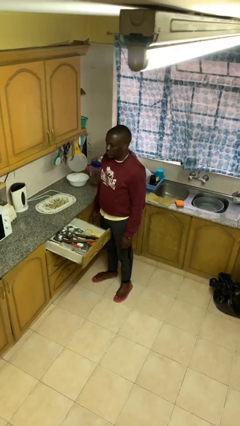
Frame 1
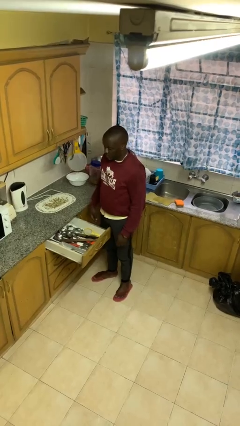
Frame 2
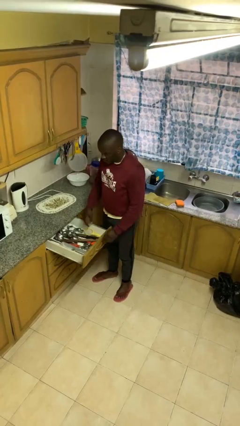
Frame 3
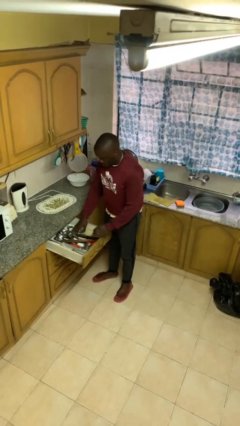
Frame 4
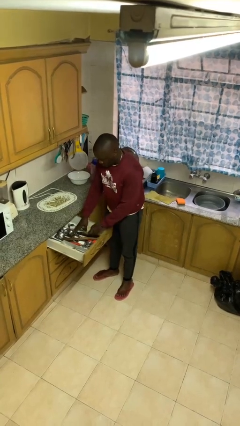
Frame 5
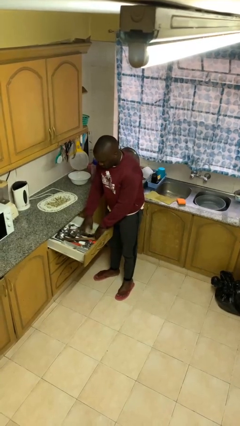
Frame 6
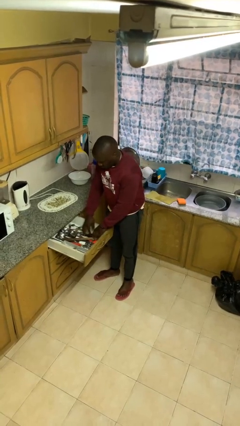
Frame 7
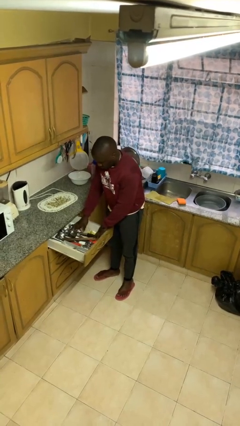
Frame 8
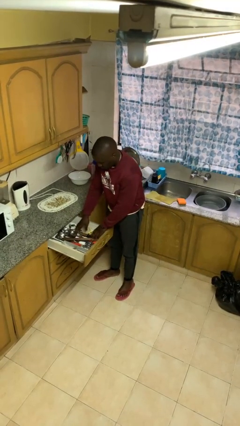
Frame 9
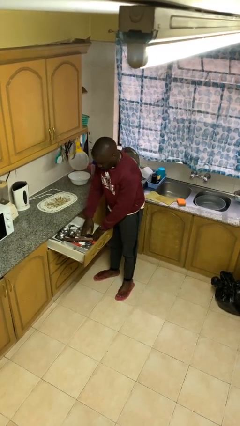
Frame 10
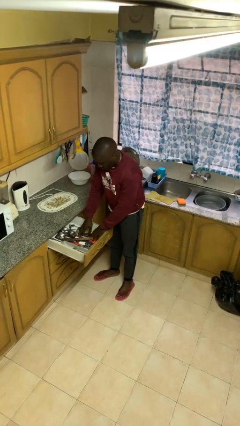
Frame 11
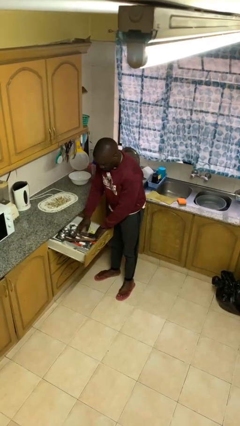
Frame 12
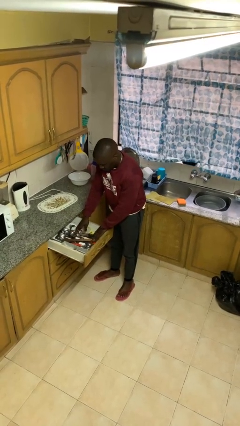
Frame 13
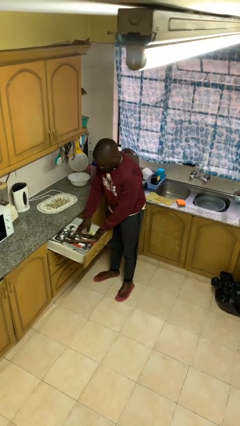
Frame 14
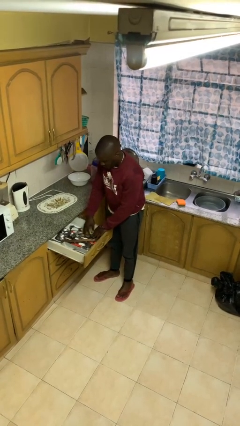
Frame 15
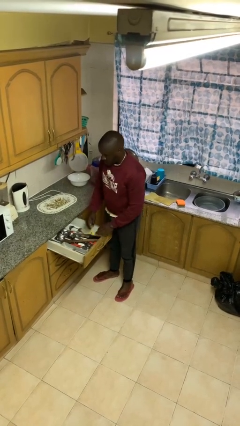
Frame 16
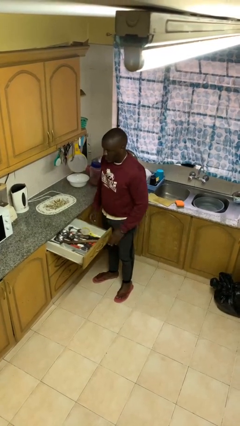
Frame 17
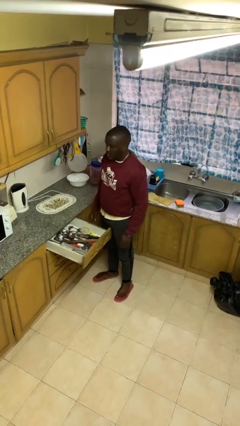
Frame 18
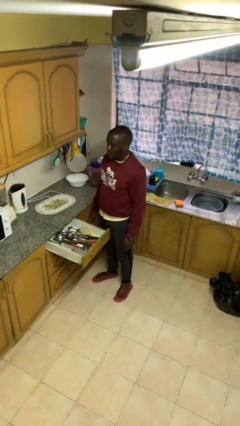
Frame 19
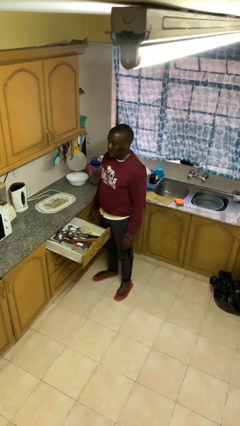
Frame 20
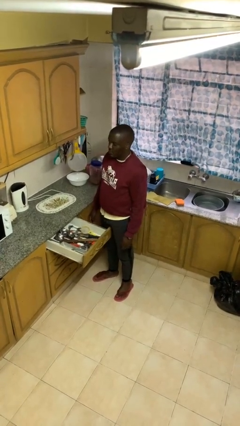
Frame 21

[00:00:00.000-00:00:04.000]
person searches in kitchen drawer

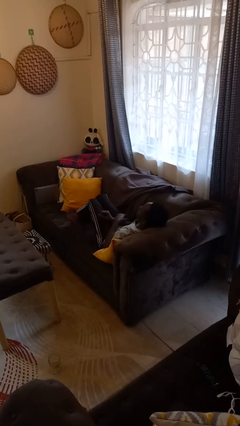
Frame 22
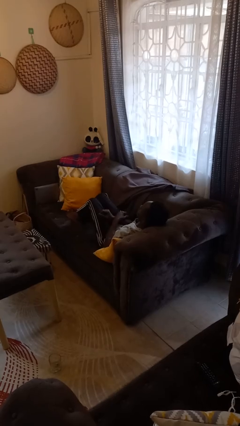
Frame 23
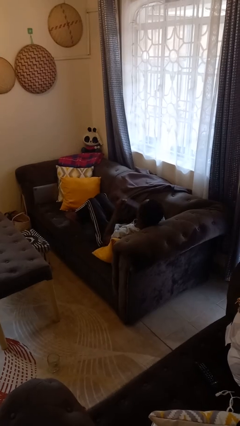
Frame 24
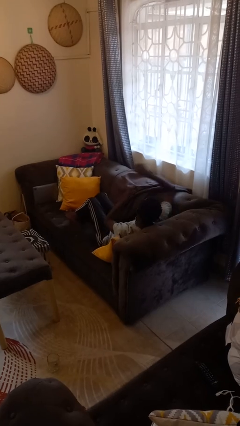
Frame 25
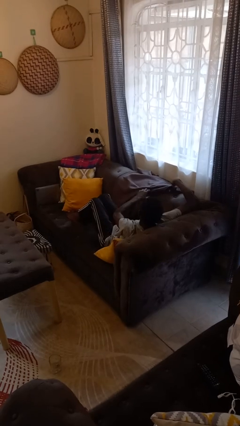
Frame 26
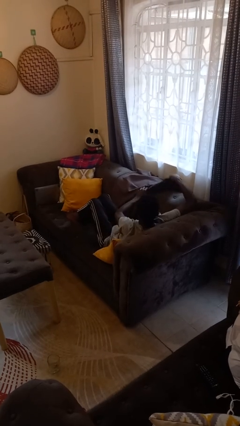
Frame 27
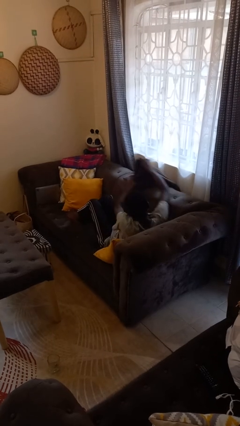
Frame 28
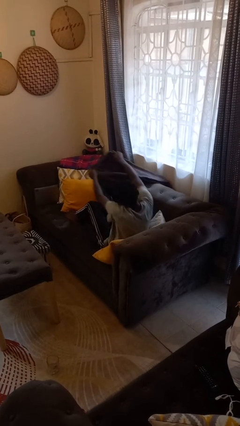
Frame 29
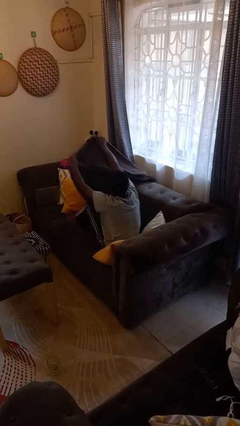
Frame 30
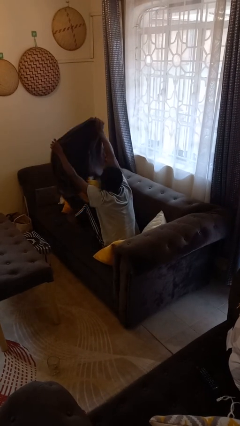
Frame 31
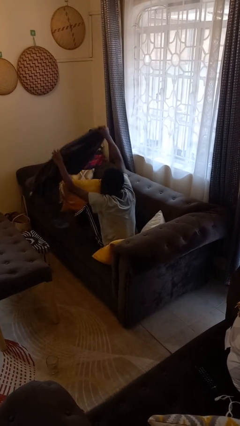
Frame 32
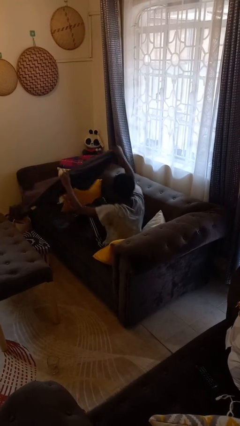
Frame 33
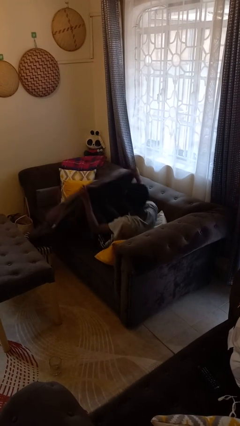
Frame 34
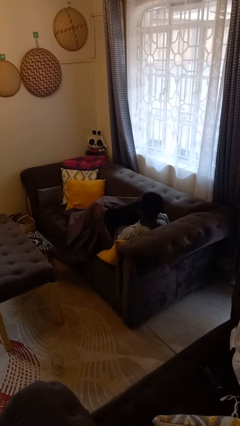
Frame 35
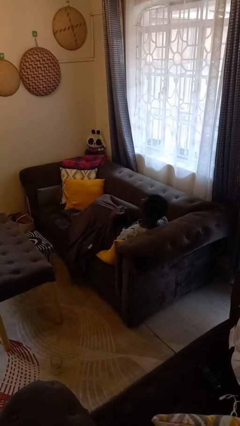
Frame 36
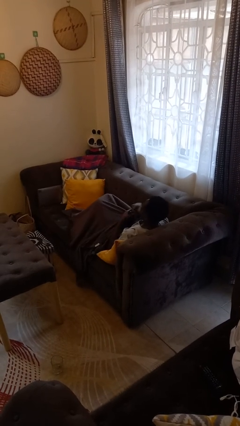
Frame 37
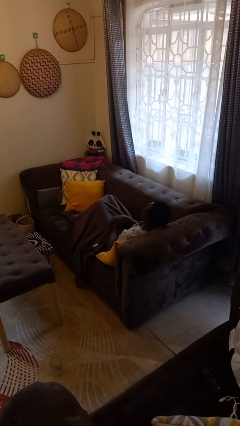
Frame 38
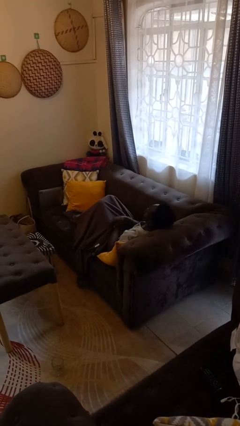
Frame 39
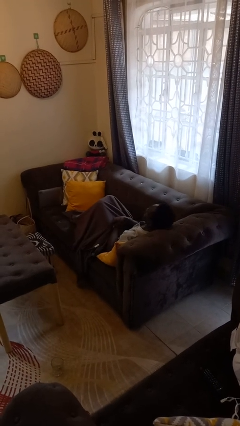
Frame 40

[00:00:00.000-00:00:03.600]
person covers with blanket

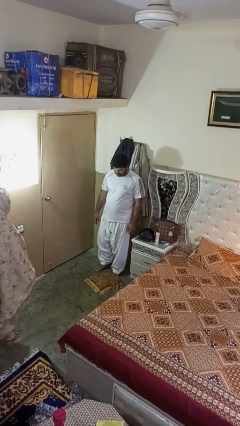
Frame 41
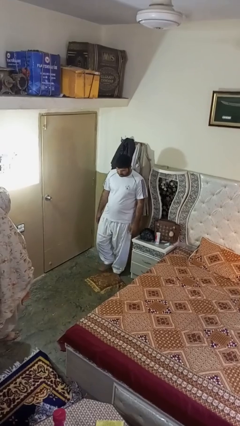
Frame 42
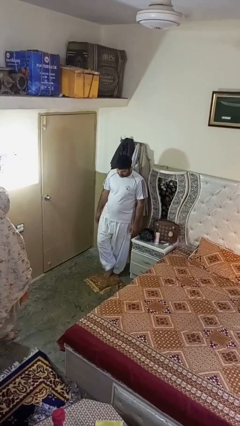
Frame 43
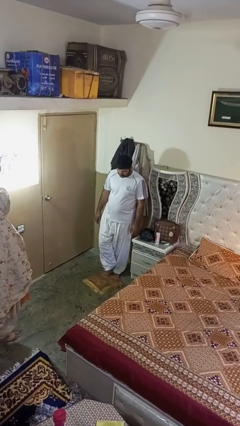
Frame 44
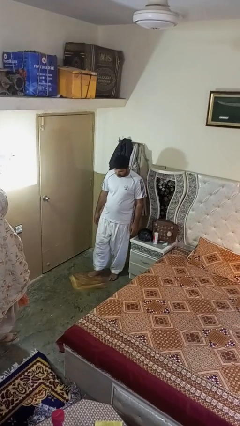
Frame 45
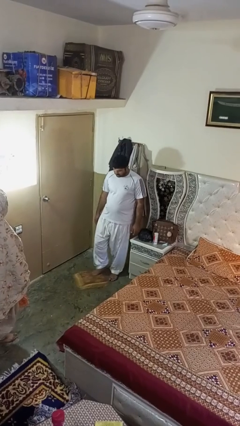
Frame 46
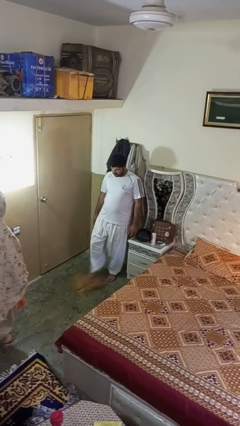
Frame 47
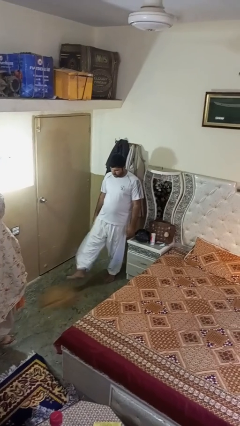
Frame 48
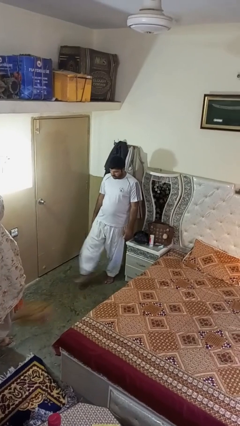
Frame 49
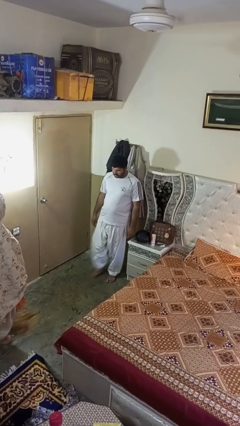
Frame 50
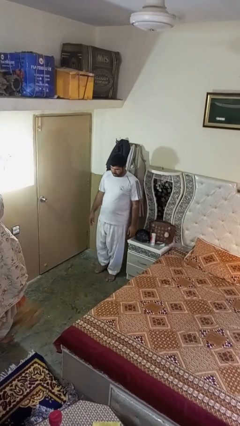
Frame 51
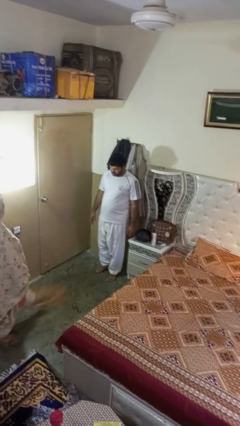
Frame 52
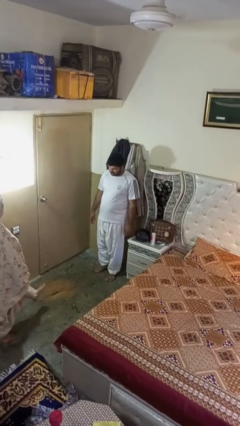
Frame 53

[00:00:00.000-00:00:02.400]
person kicks object to person

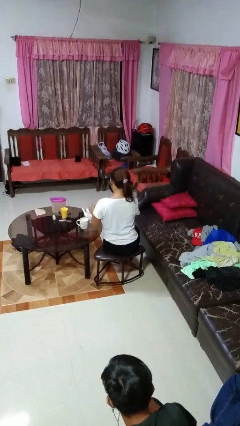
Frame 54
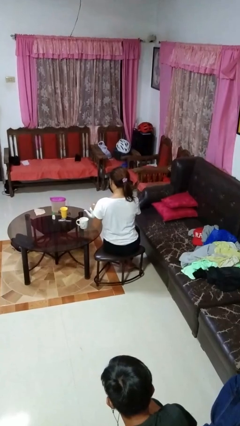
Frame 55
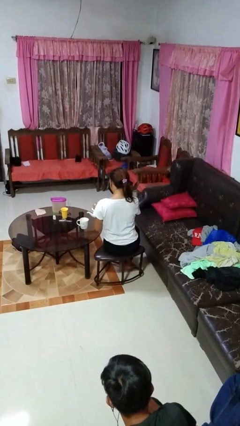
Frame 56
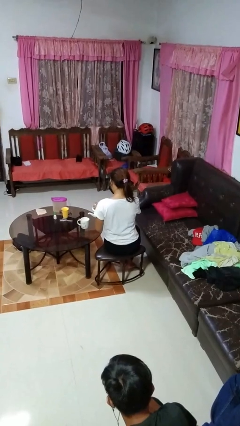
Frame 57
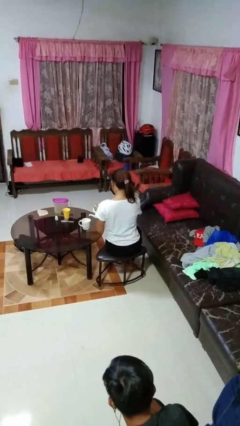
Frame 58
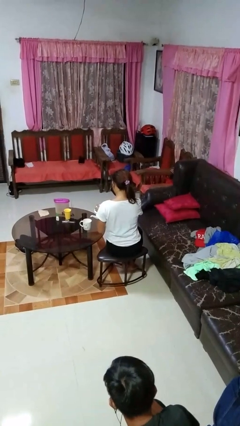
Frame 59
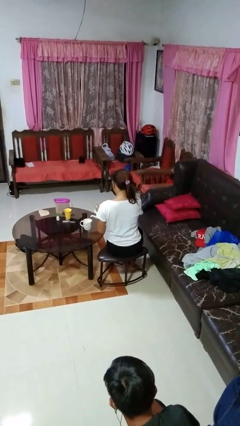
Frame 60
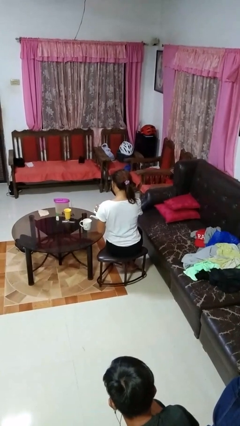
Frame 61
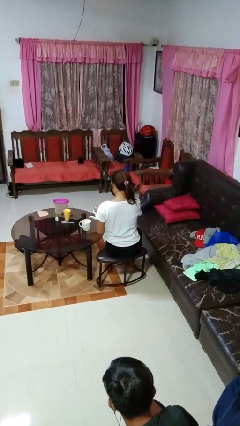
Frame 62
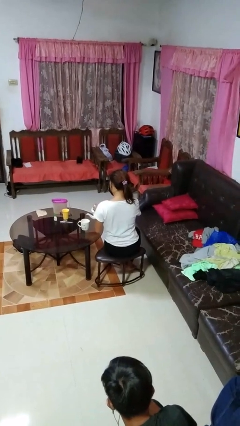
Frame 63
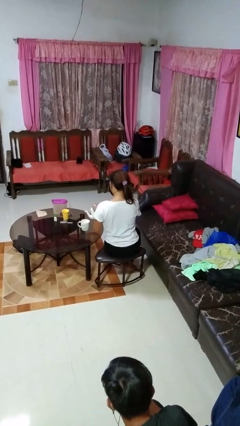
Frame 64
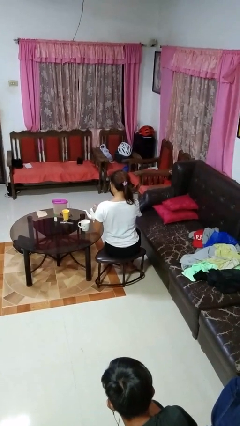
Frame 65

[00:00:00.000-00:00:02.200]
person pours coffee into mug

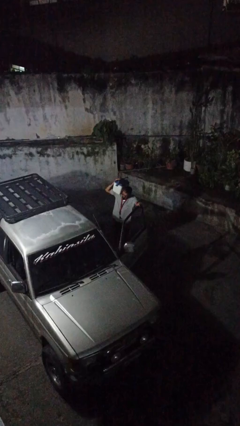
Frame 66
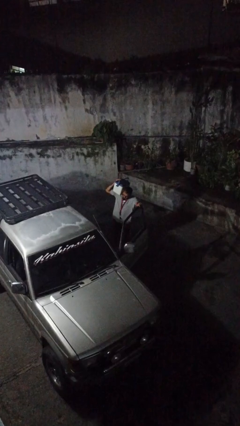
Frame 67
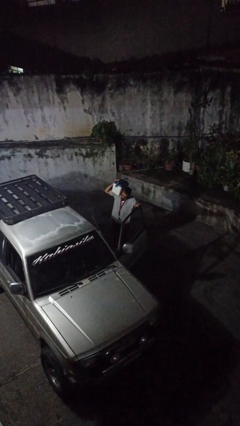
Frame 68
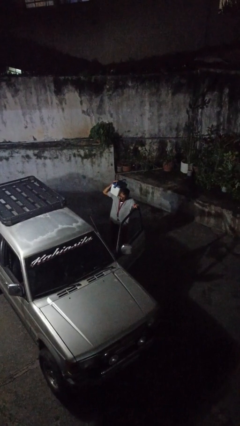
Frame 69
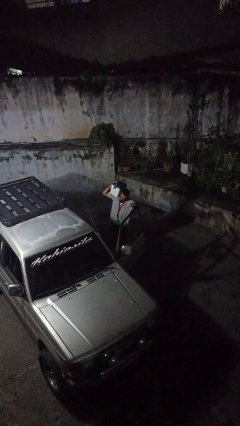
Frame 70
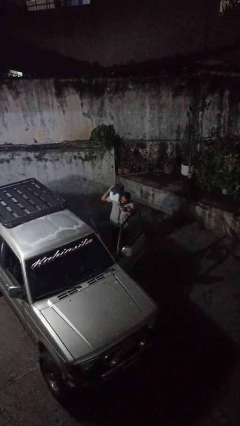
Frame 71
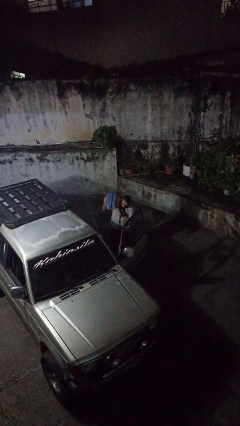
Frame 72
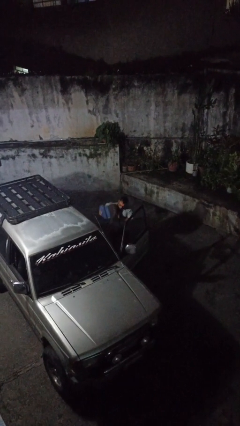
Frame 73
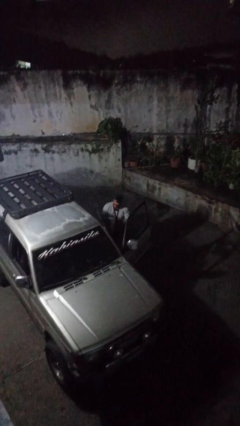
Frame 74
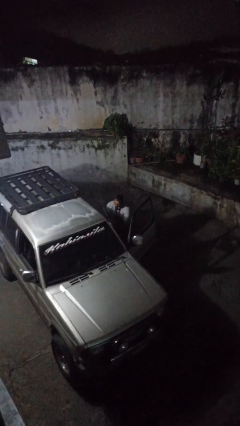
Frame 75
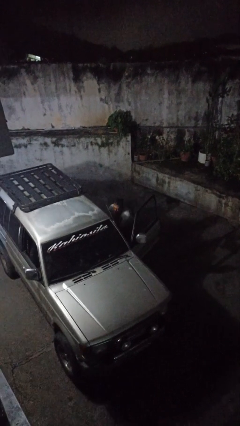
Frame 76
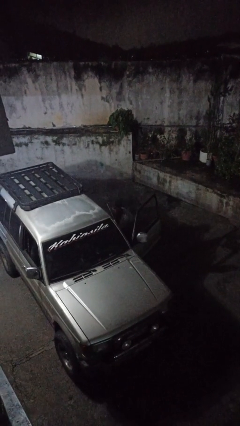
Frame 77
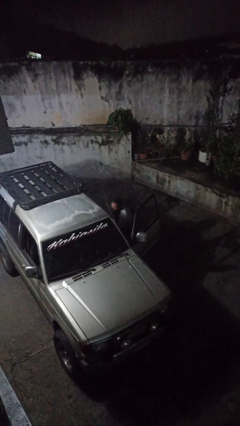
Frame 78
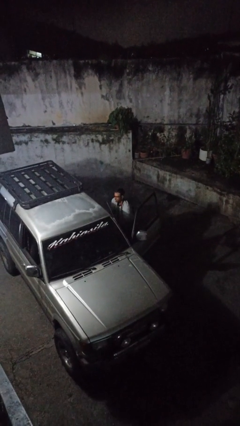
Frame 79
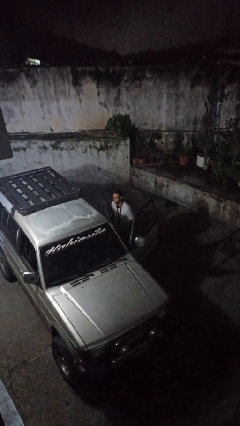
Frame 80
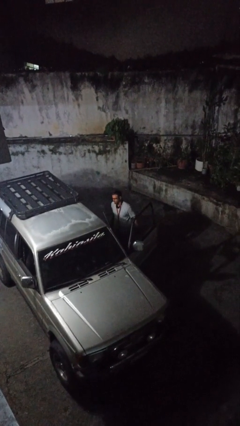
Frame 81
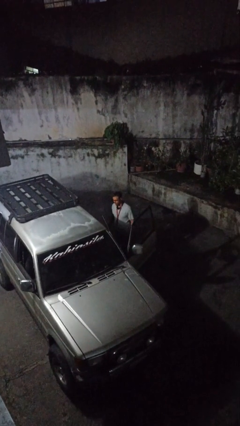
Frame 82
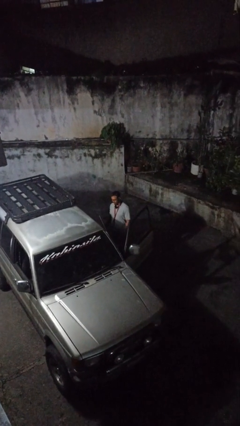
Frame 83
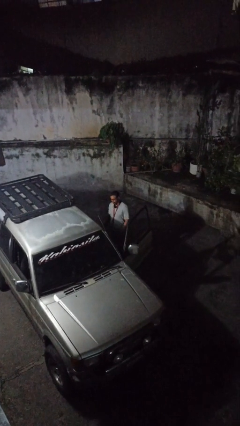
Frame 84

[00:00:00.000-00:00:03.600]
person loads car

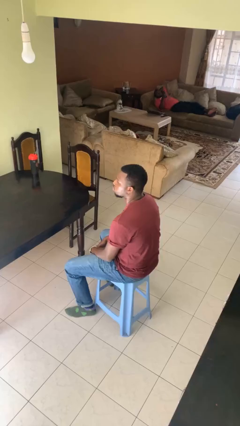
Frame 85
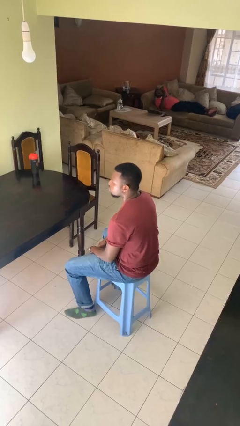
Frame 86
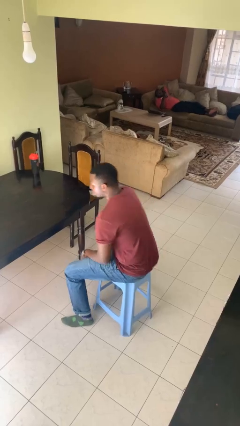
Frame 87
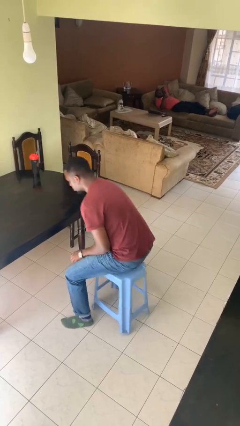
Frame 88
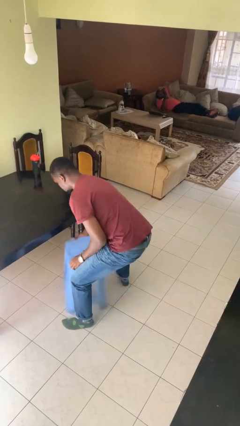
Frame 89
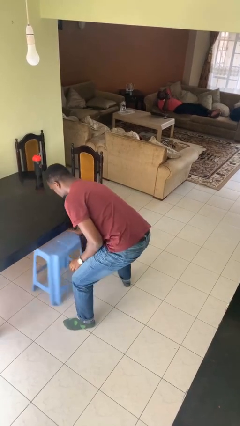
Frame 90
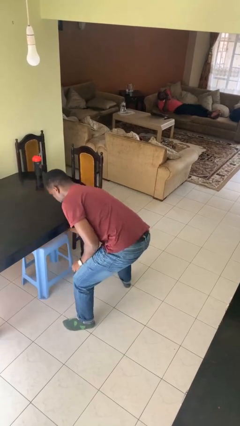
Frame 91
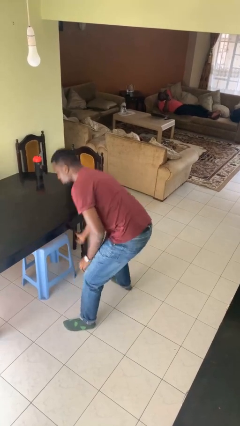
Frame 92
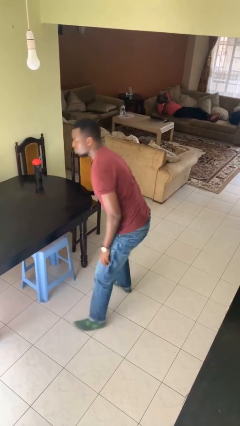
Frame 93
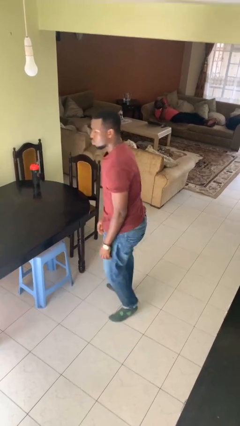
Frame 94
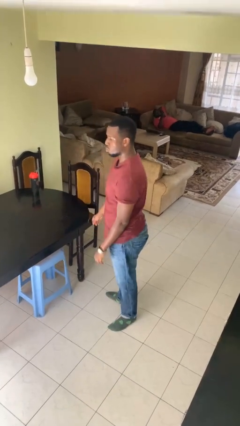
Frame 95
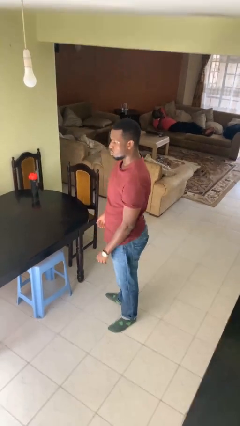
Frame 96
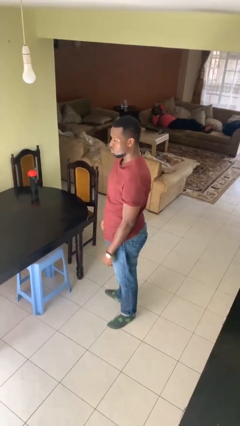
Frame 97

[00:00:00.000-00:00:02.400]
person stands up
